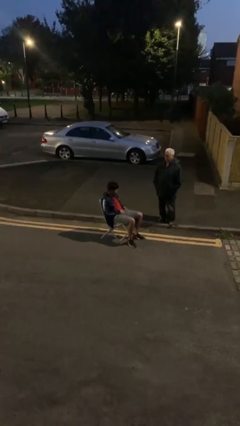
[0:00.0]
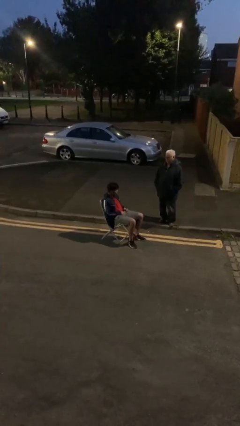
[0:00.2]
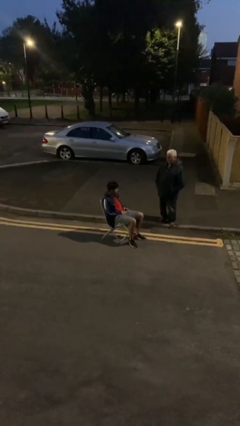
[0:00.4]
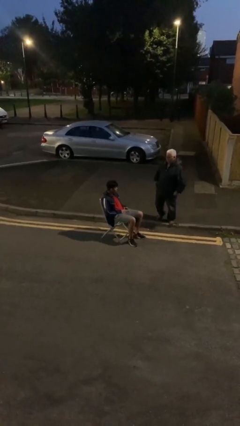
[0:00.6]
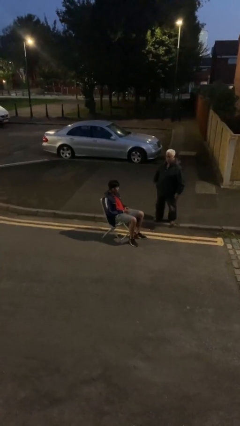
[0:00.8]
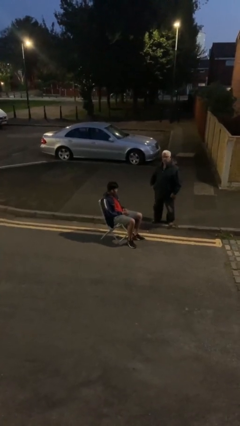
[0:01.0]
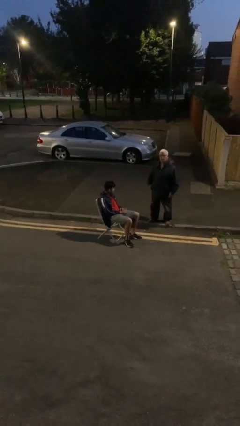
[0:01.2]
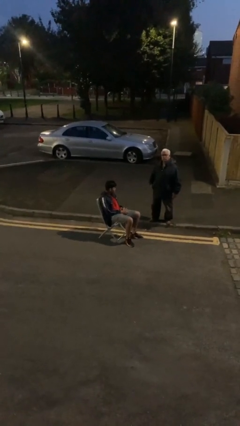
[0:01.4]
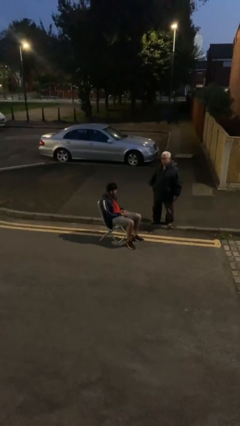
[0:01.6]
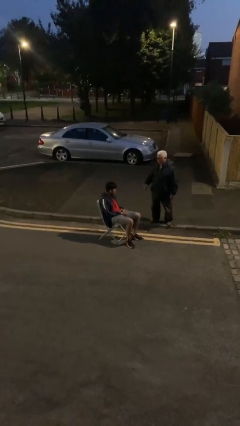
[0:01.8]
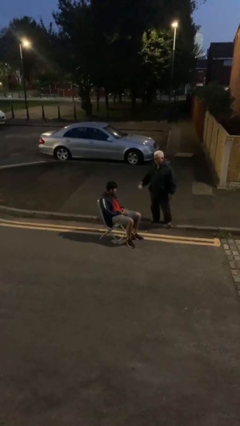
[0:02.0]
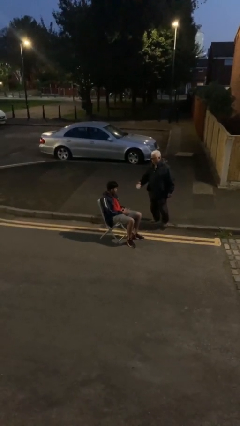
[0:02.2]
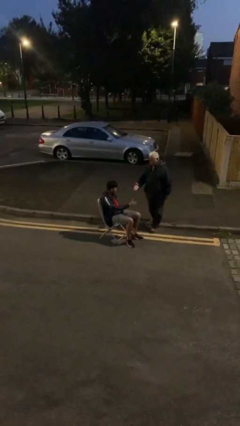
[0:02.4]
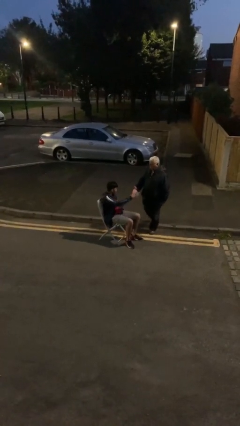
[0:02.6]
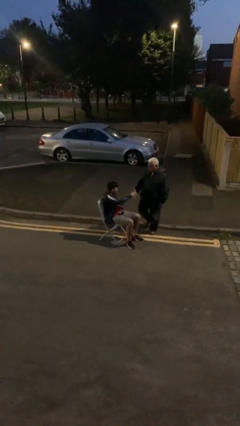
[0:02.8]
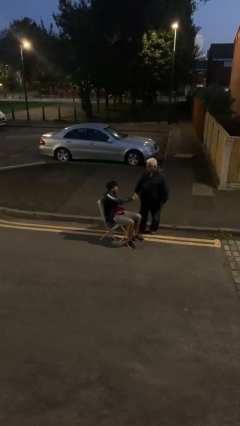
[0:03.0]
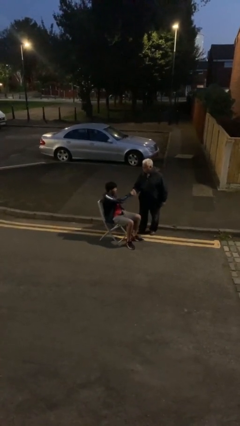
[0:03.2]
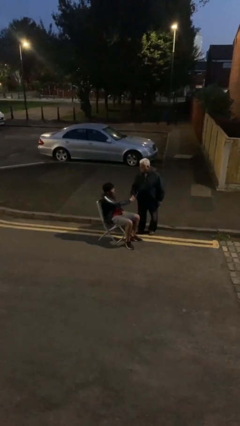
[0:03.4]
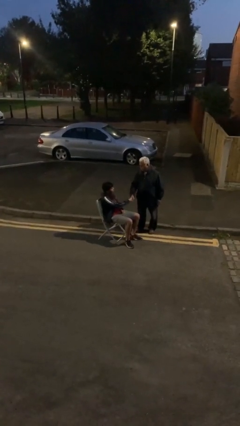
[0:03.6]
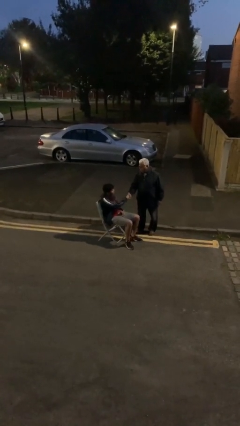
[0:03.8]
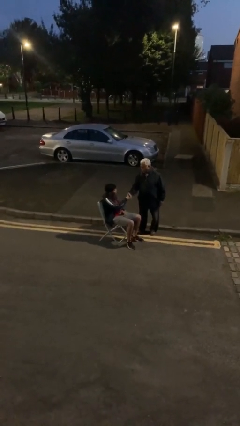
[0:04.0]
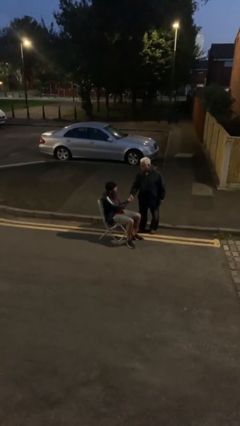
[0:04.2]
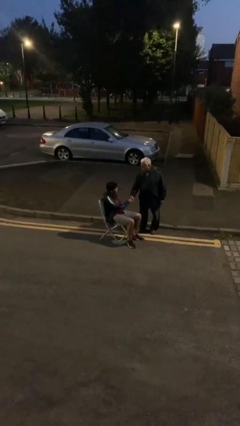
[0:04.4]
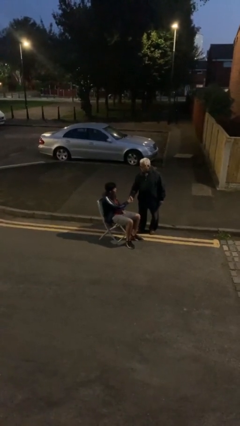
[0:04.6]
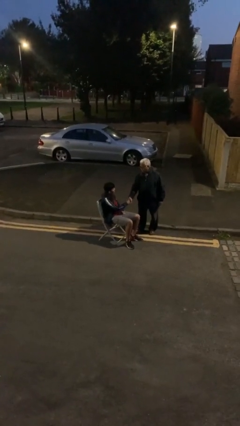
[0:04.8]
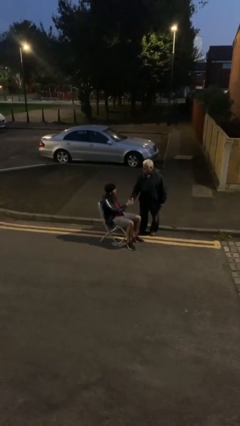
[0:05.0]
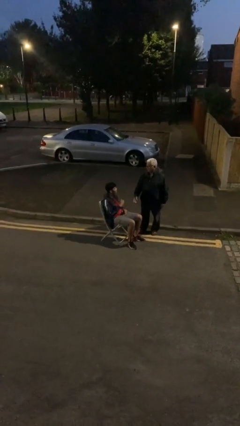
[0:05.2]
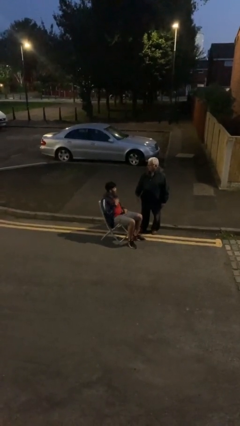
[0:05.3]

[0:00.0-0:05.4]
person shakes hand

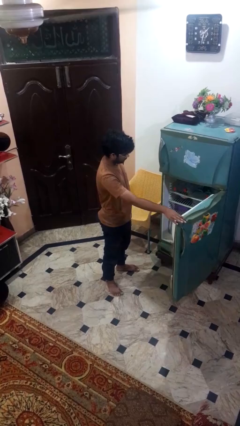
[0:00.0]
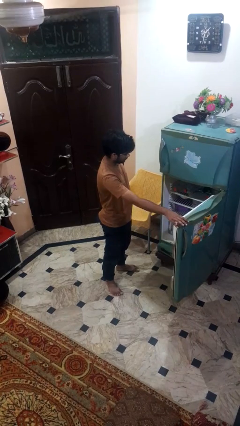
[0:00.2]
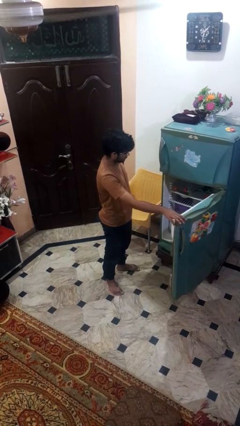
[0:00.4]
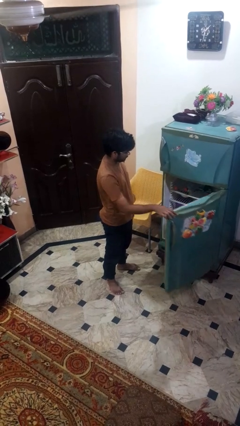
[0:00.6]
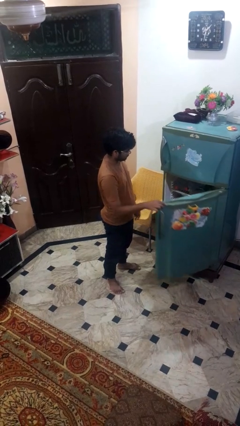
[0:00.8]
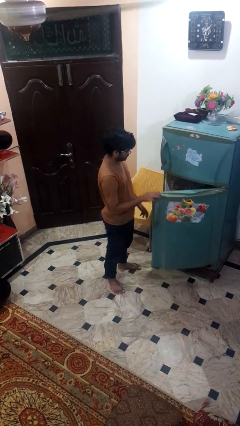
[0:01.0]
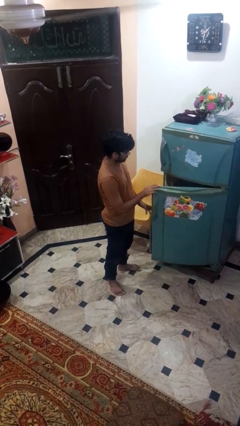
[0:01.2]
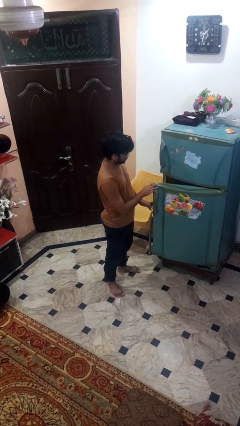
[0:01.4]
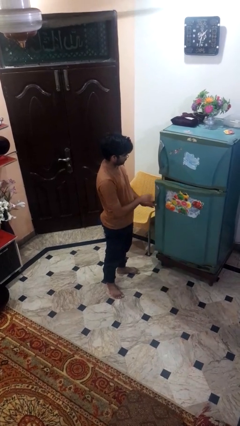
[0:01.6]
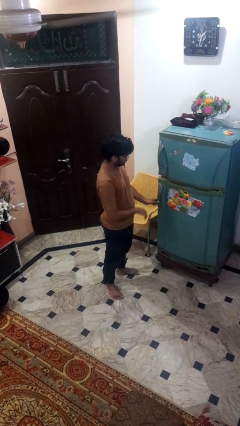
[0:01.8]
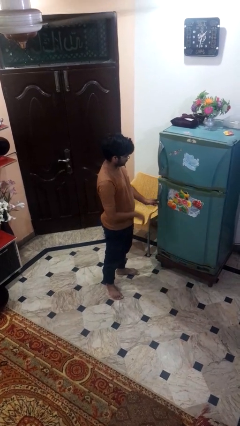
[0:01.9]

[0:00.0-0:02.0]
person closes refrigerator

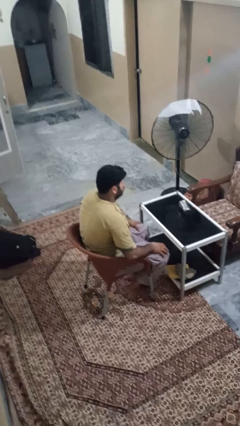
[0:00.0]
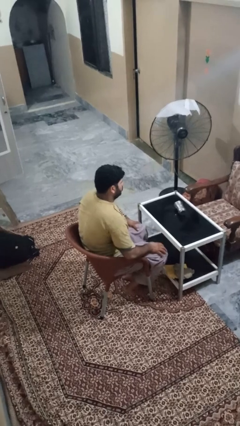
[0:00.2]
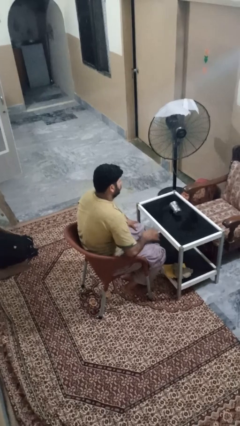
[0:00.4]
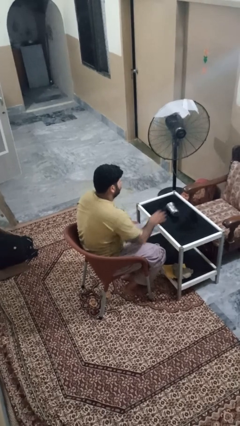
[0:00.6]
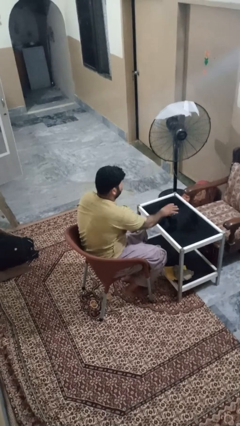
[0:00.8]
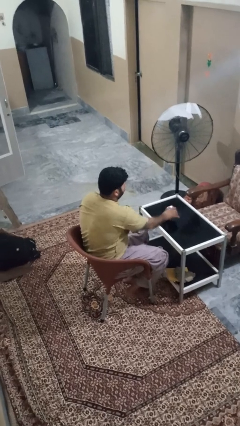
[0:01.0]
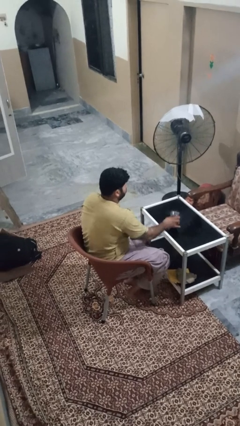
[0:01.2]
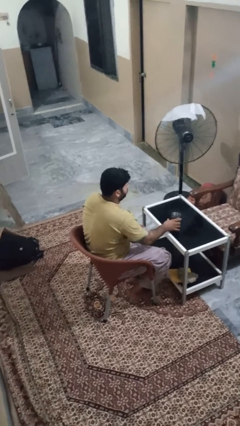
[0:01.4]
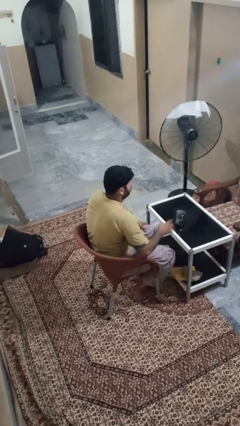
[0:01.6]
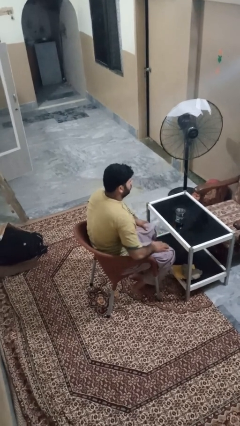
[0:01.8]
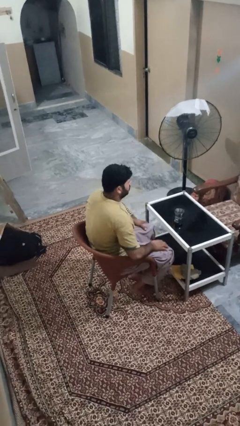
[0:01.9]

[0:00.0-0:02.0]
person sets upright glass

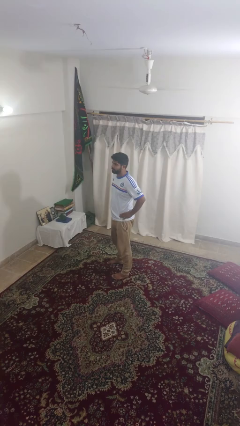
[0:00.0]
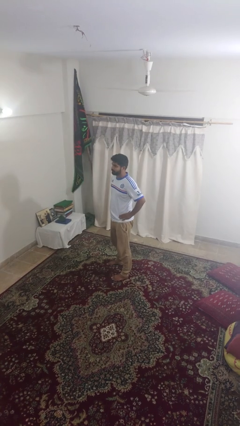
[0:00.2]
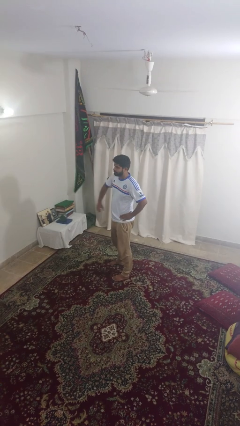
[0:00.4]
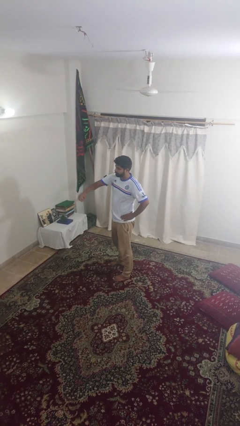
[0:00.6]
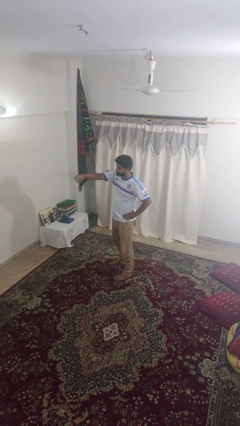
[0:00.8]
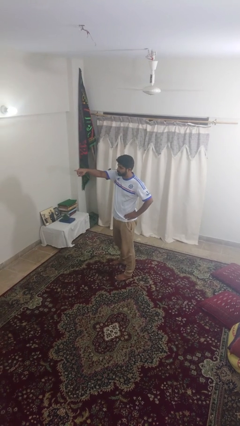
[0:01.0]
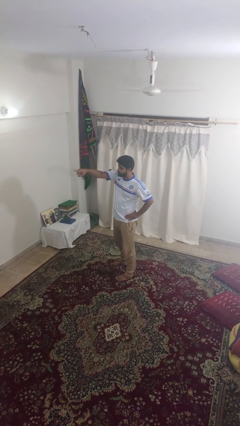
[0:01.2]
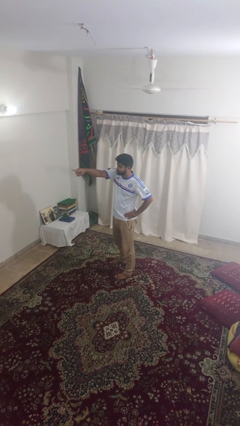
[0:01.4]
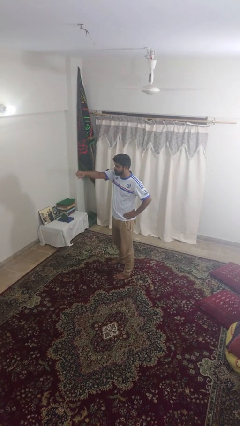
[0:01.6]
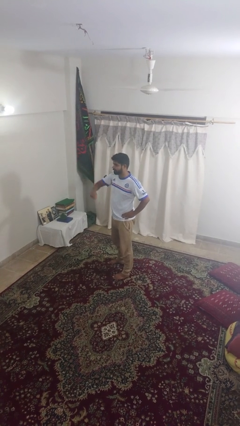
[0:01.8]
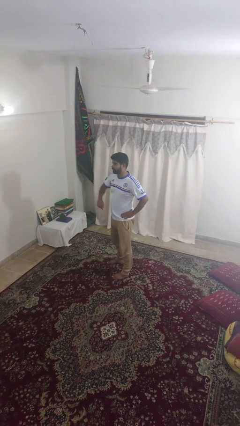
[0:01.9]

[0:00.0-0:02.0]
person points at person

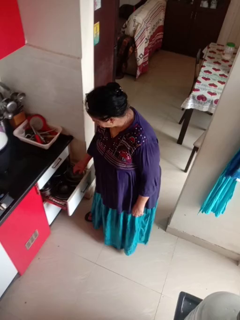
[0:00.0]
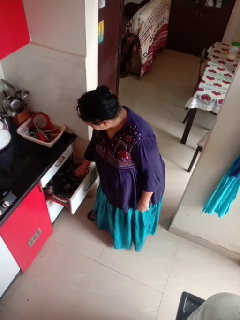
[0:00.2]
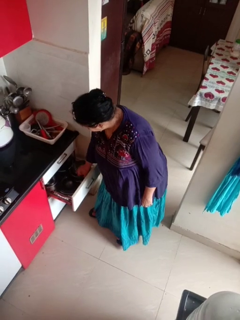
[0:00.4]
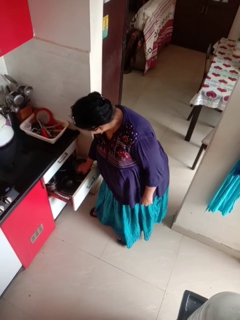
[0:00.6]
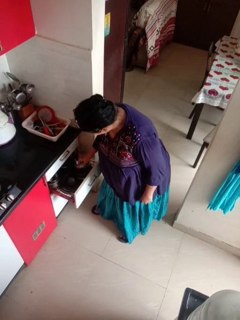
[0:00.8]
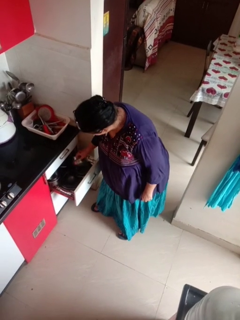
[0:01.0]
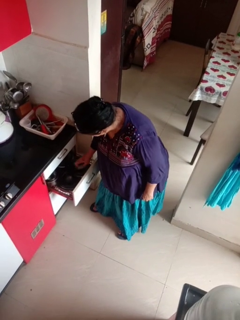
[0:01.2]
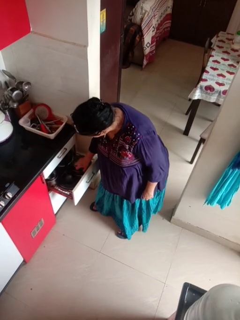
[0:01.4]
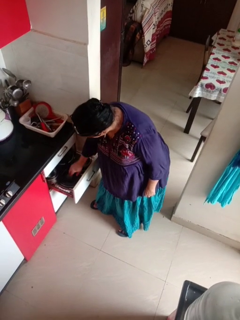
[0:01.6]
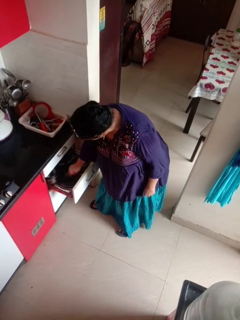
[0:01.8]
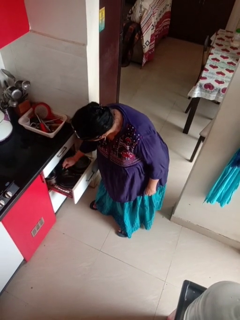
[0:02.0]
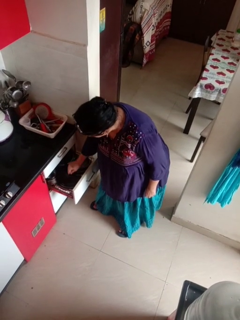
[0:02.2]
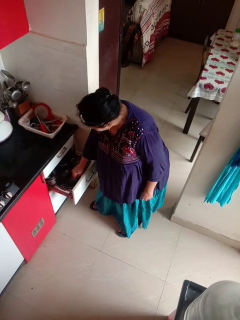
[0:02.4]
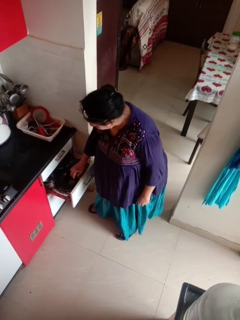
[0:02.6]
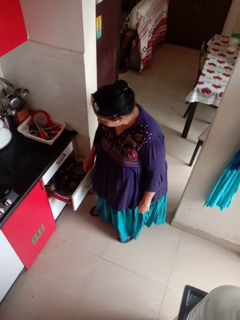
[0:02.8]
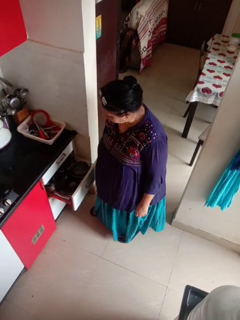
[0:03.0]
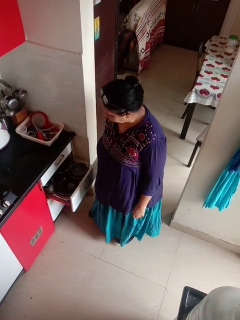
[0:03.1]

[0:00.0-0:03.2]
person searches in kitchen drawer

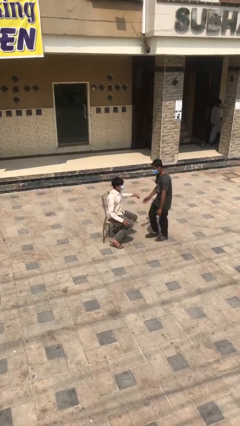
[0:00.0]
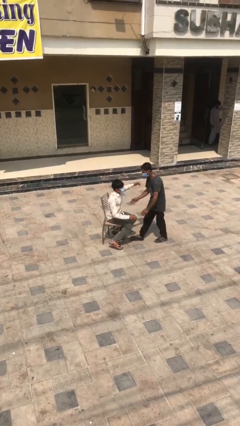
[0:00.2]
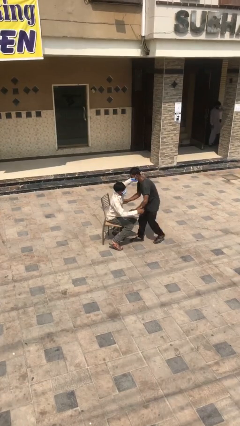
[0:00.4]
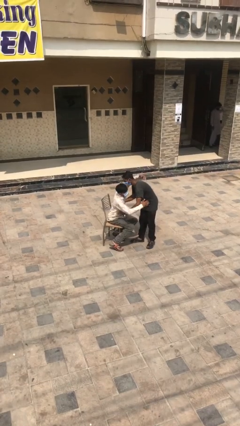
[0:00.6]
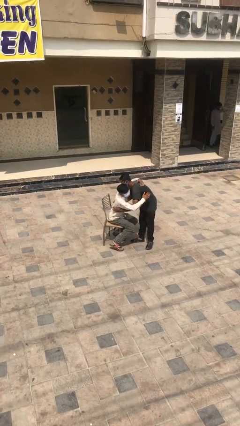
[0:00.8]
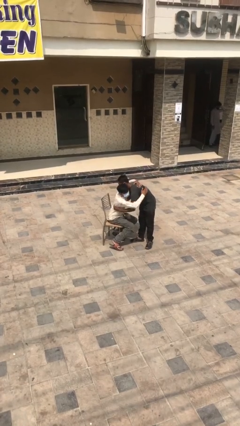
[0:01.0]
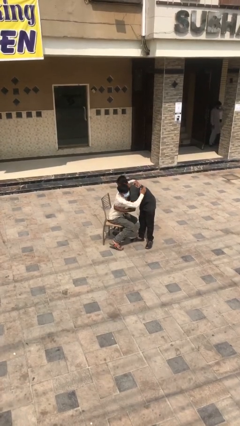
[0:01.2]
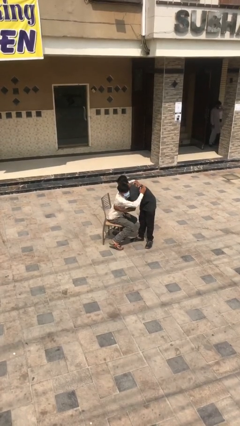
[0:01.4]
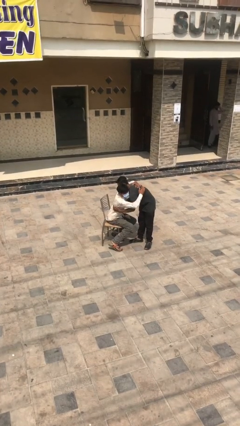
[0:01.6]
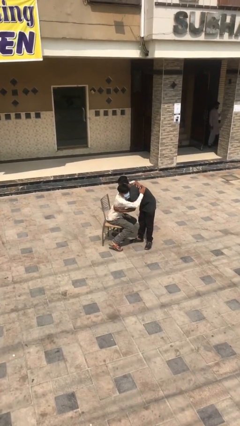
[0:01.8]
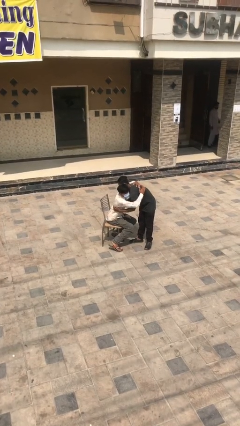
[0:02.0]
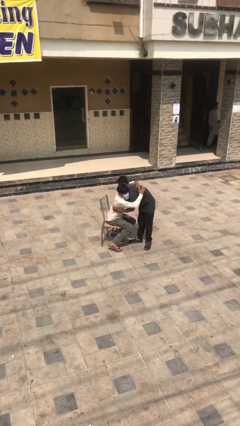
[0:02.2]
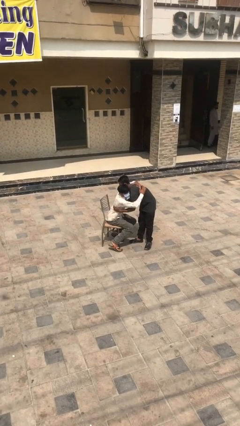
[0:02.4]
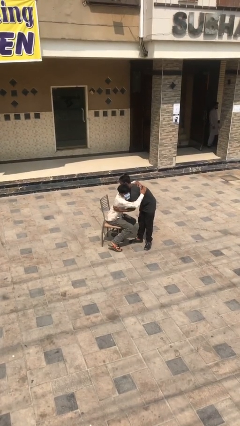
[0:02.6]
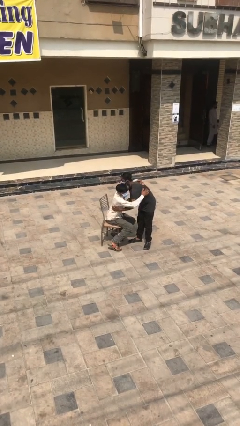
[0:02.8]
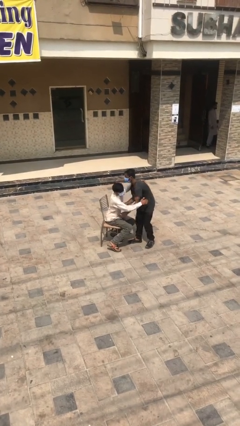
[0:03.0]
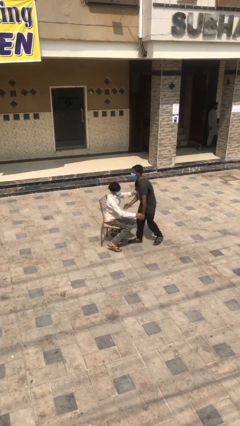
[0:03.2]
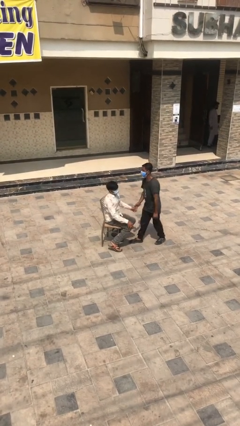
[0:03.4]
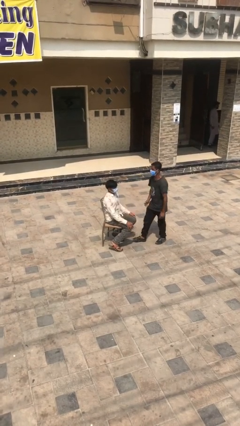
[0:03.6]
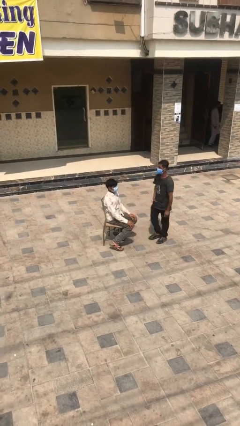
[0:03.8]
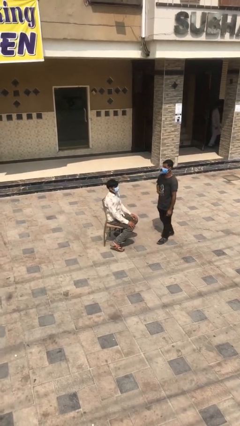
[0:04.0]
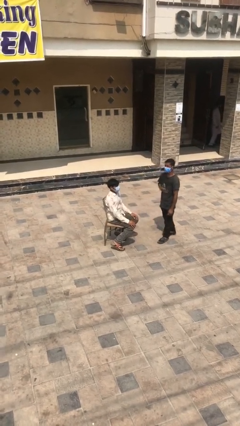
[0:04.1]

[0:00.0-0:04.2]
person embraces person
